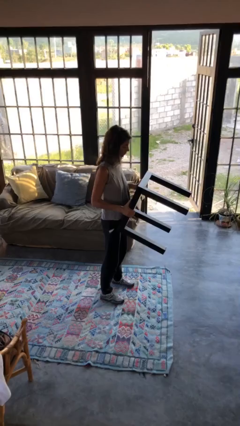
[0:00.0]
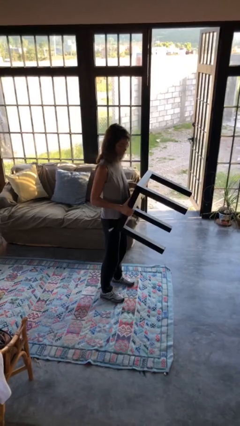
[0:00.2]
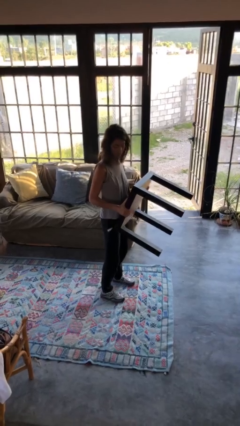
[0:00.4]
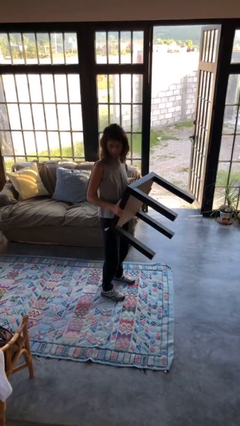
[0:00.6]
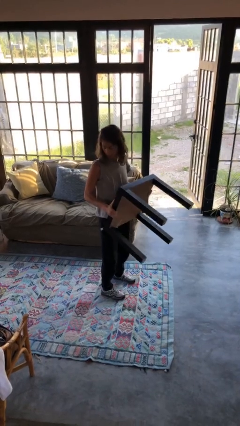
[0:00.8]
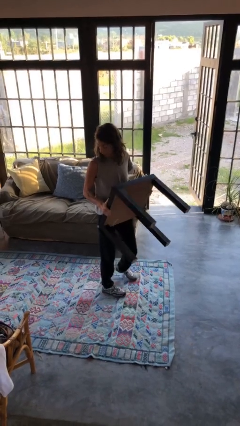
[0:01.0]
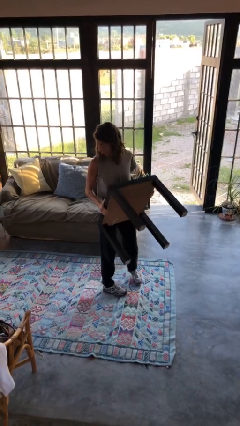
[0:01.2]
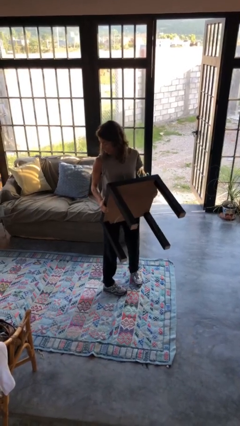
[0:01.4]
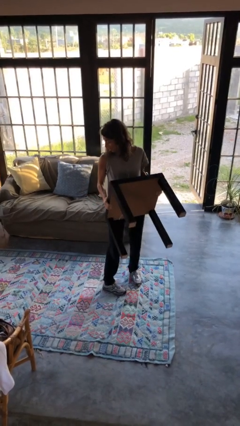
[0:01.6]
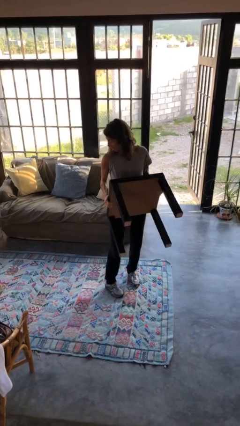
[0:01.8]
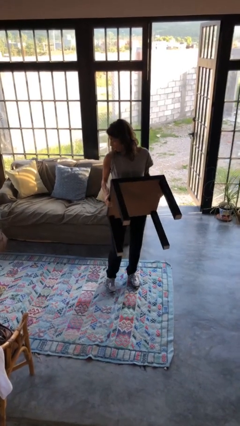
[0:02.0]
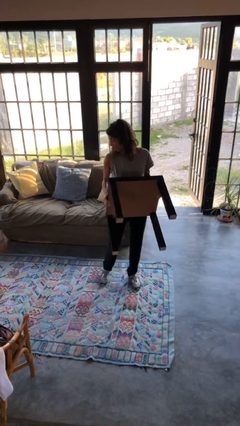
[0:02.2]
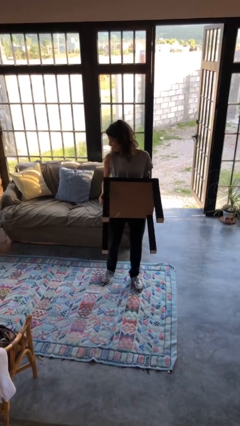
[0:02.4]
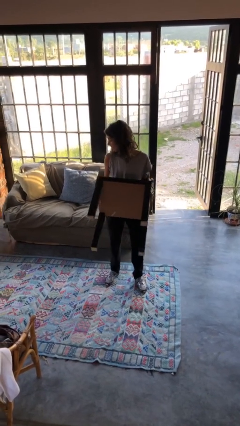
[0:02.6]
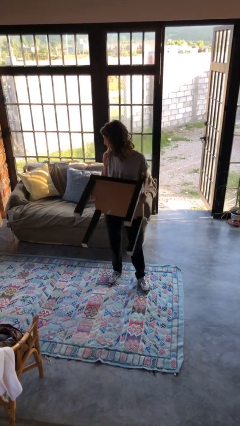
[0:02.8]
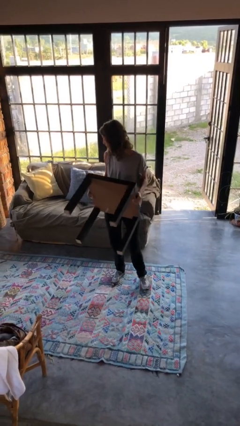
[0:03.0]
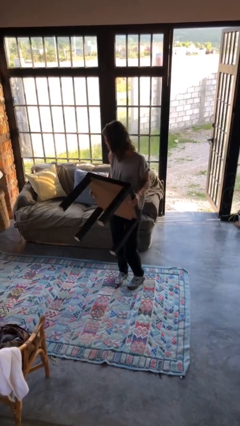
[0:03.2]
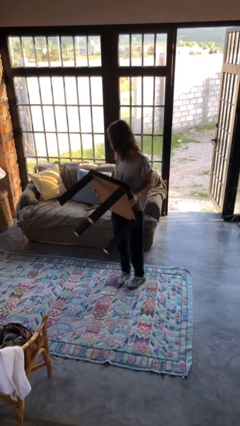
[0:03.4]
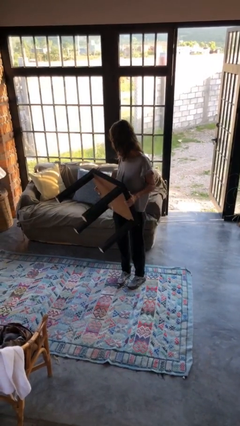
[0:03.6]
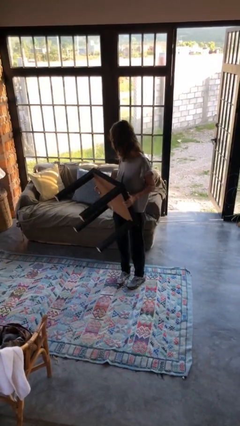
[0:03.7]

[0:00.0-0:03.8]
person carries furniture

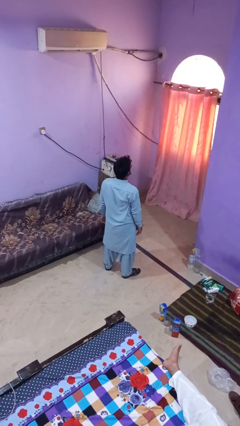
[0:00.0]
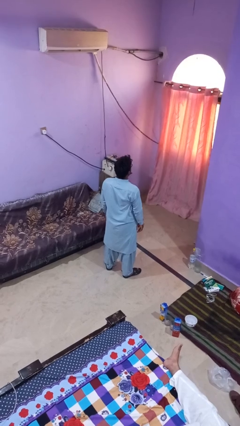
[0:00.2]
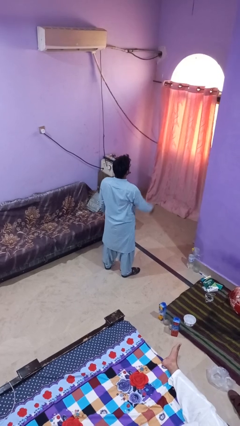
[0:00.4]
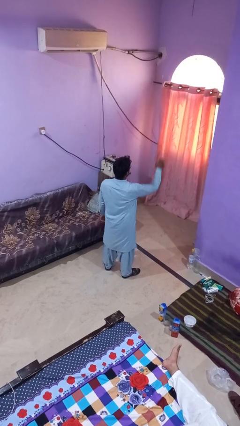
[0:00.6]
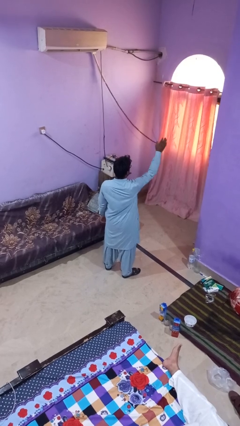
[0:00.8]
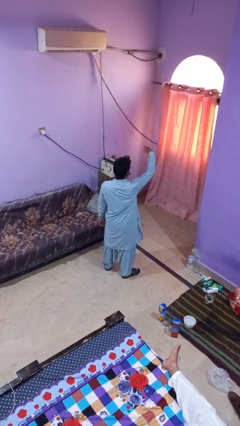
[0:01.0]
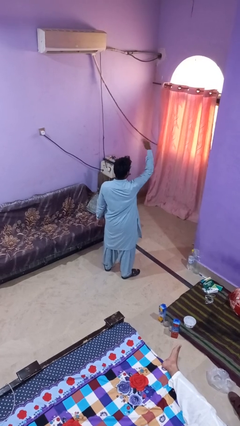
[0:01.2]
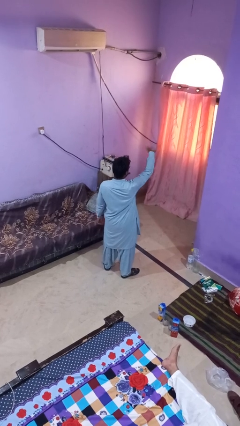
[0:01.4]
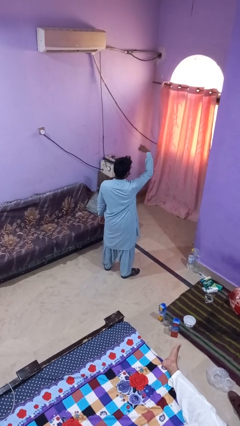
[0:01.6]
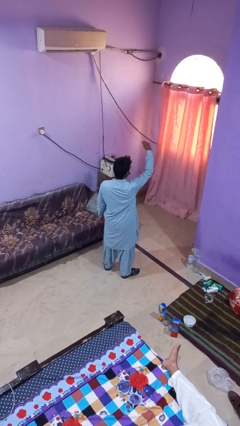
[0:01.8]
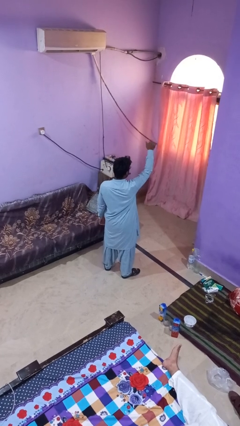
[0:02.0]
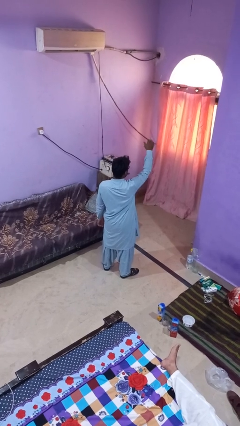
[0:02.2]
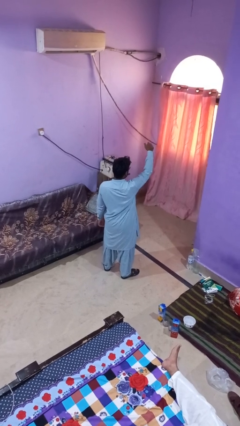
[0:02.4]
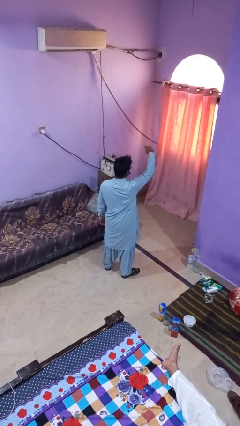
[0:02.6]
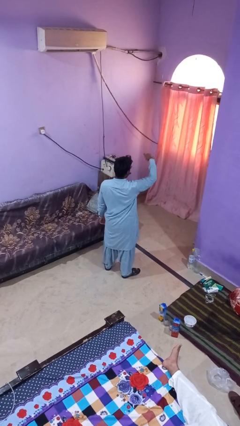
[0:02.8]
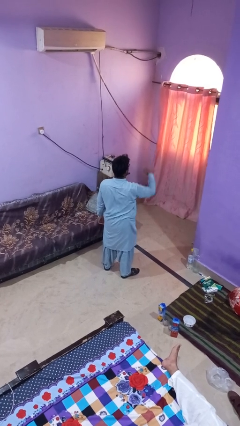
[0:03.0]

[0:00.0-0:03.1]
person gestures come here

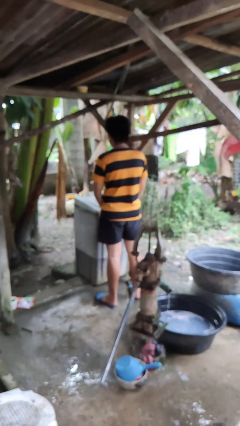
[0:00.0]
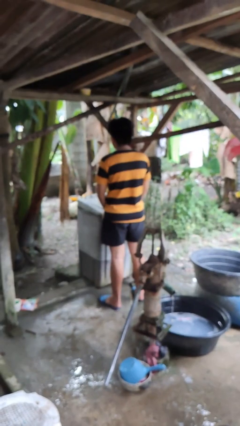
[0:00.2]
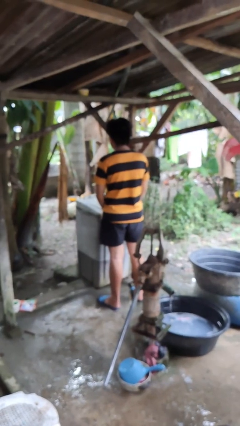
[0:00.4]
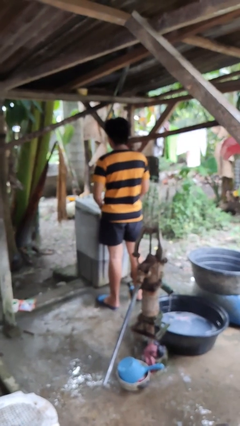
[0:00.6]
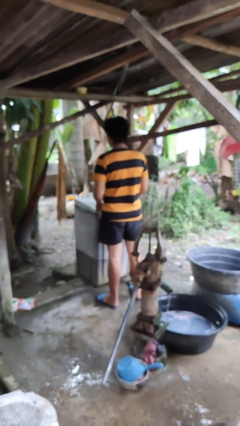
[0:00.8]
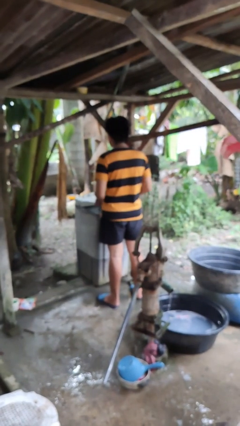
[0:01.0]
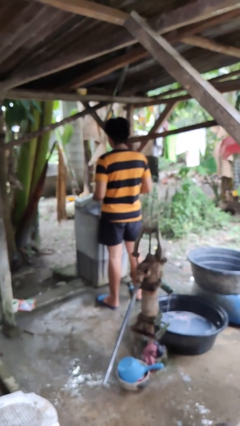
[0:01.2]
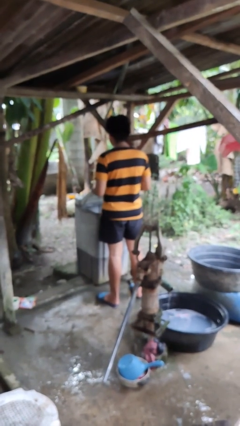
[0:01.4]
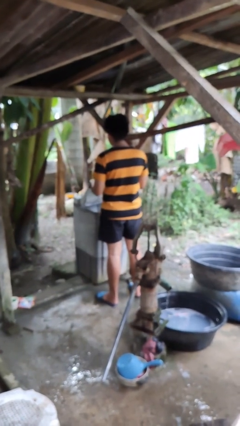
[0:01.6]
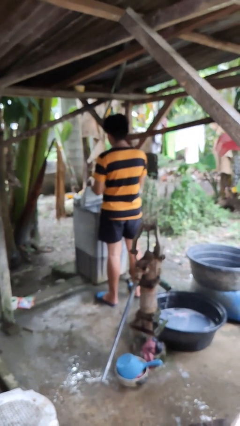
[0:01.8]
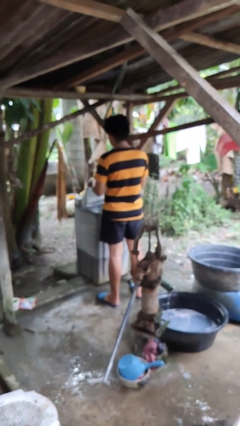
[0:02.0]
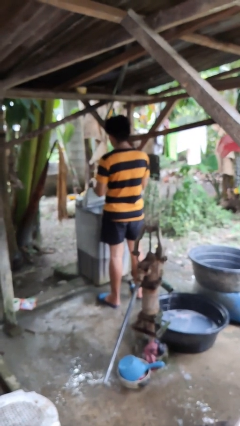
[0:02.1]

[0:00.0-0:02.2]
person opens clothes washer

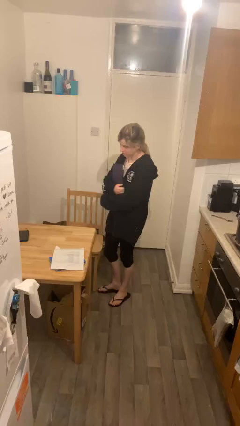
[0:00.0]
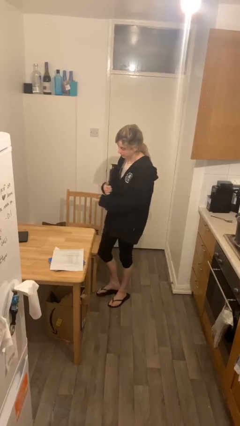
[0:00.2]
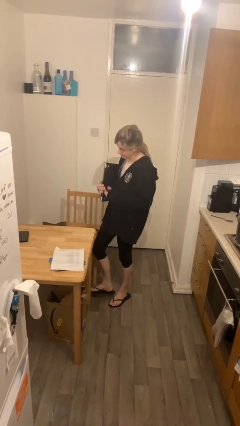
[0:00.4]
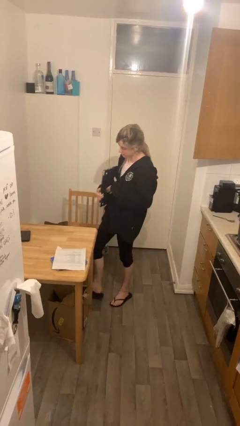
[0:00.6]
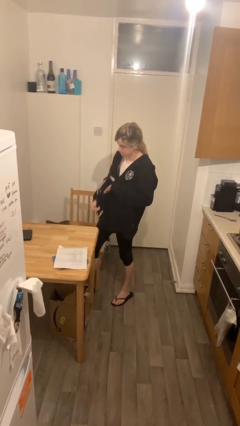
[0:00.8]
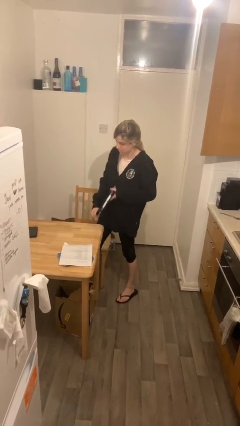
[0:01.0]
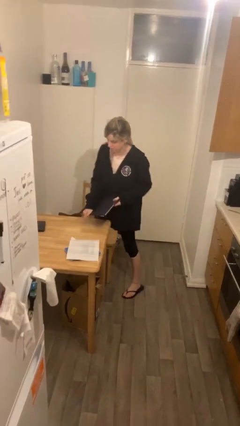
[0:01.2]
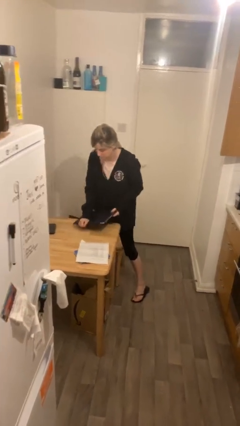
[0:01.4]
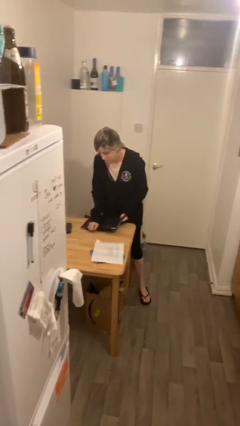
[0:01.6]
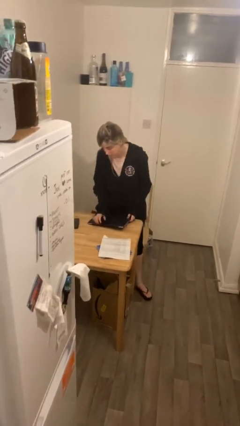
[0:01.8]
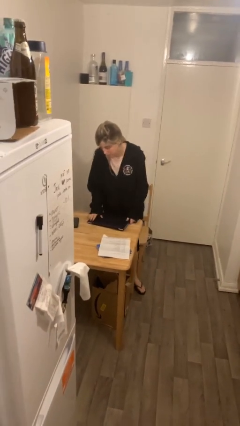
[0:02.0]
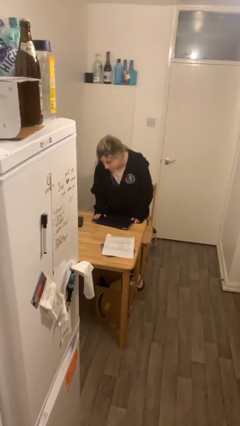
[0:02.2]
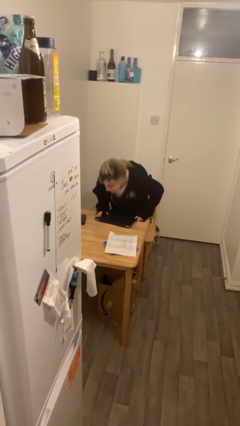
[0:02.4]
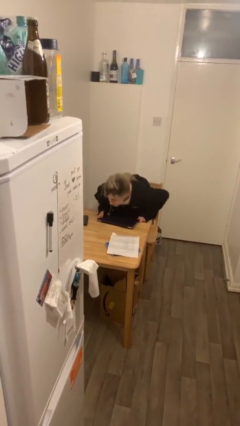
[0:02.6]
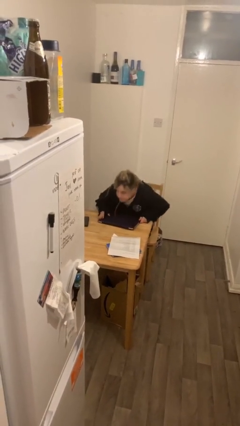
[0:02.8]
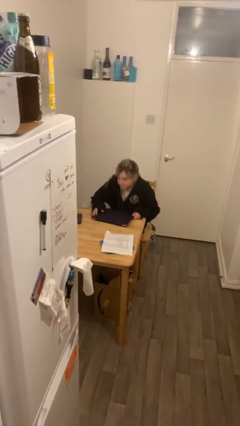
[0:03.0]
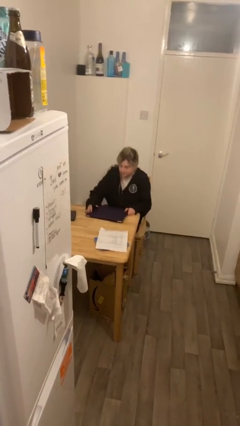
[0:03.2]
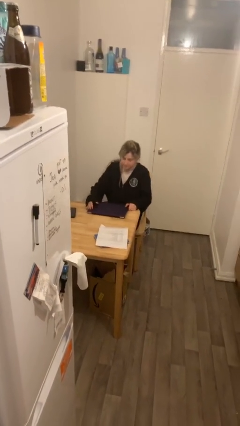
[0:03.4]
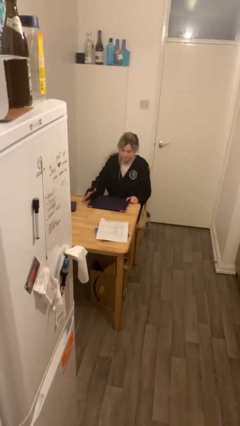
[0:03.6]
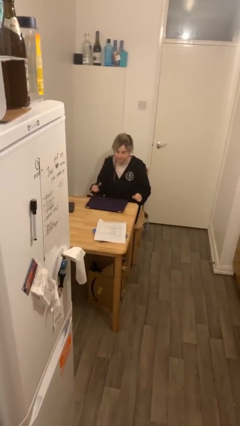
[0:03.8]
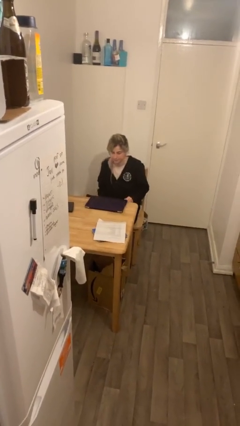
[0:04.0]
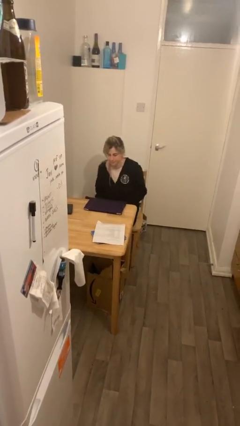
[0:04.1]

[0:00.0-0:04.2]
person sits down

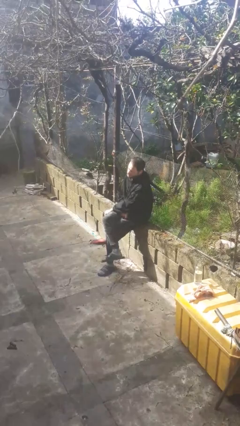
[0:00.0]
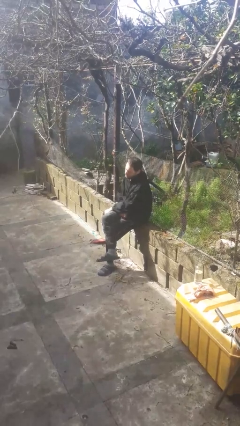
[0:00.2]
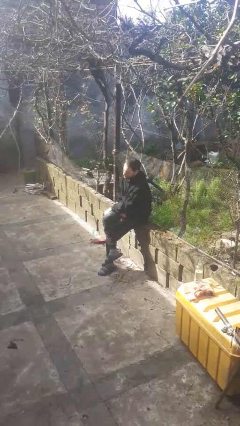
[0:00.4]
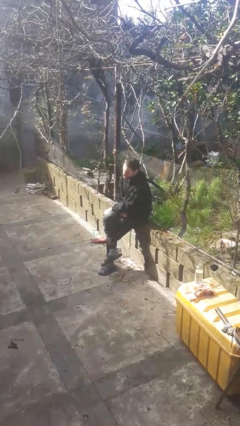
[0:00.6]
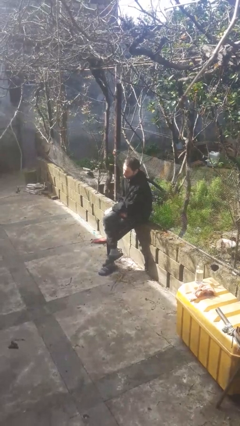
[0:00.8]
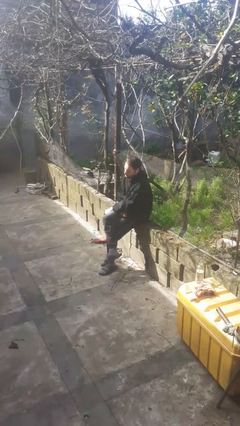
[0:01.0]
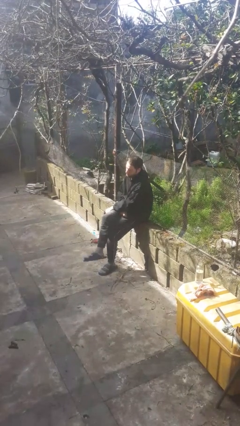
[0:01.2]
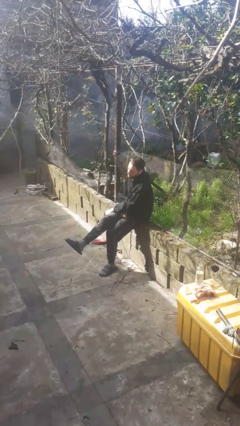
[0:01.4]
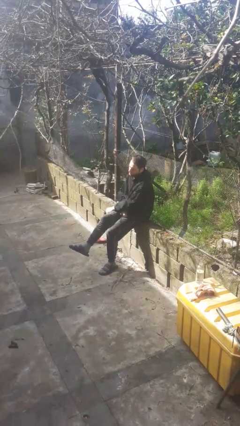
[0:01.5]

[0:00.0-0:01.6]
person crosses legs

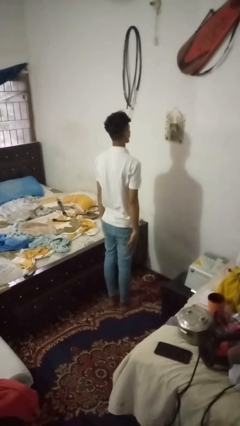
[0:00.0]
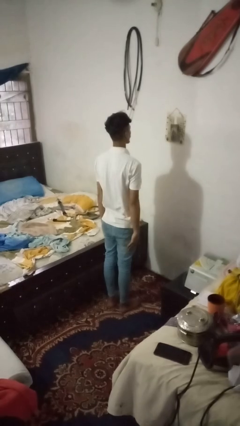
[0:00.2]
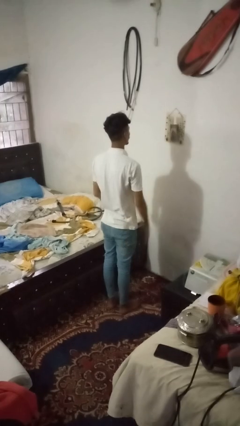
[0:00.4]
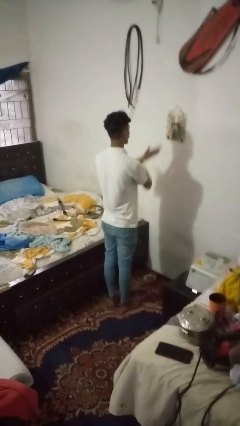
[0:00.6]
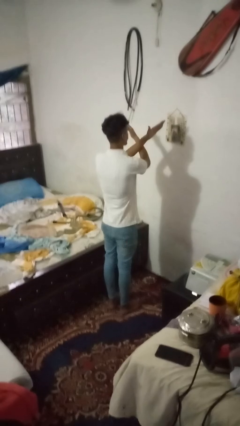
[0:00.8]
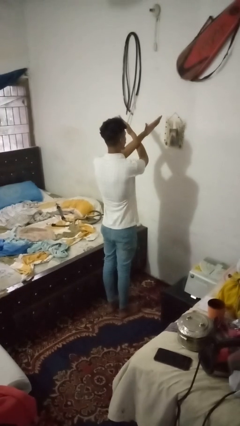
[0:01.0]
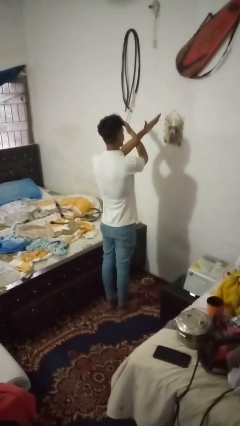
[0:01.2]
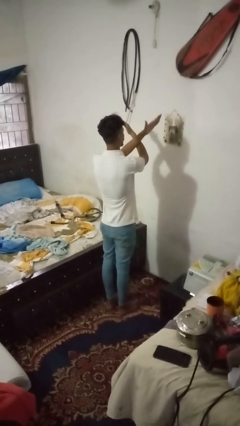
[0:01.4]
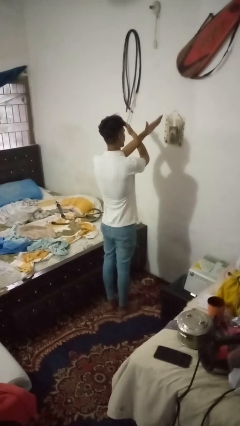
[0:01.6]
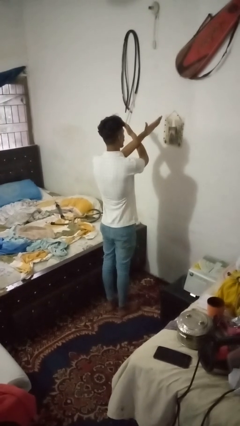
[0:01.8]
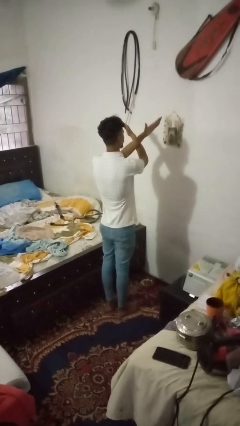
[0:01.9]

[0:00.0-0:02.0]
person gestures arms x
